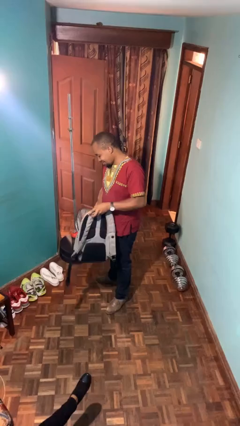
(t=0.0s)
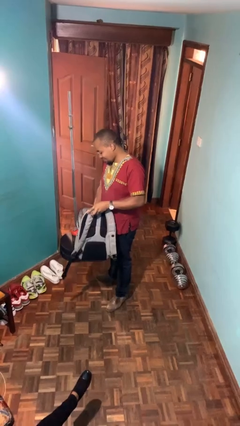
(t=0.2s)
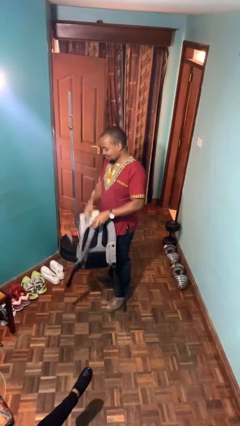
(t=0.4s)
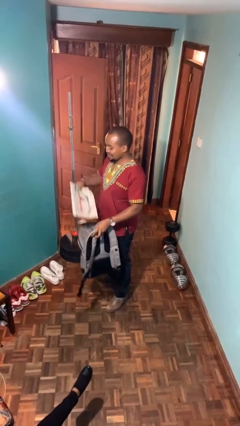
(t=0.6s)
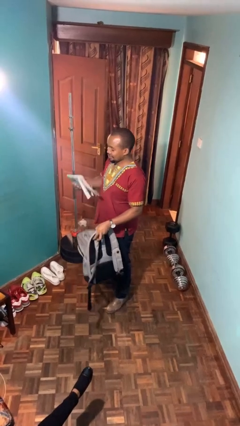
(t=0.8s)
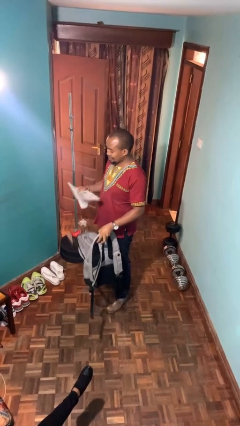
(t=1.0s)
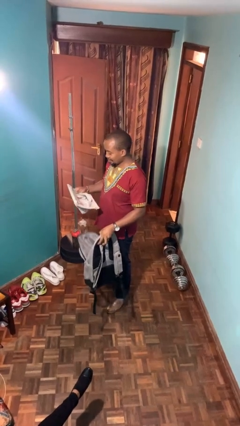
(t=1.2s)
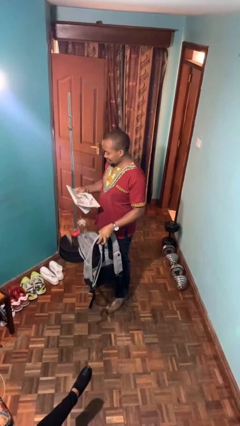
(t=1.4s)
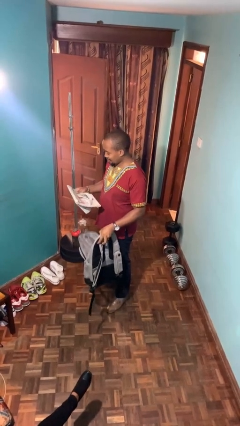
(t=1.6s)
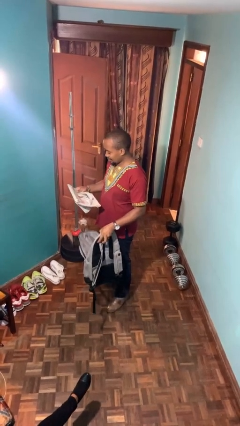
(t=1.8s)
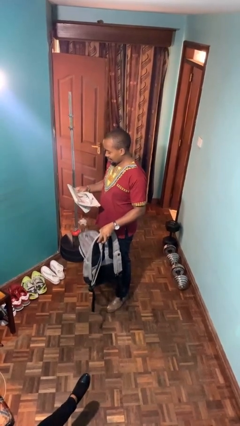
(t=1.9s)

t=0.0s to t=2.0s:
person takes object from backpack

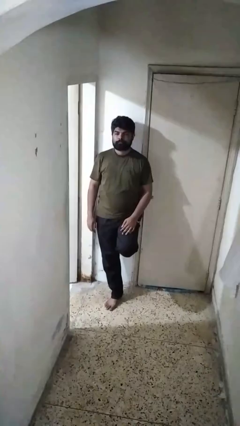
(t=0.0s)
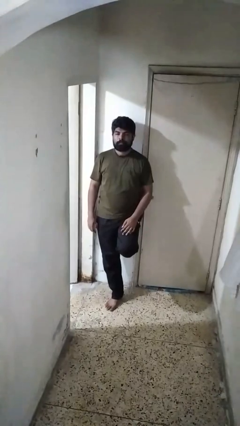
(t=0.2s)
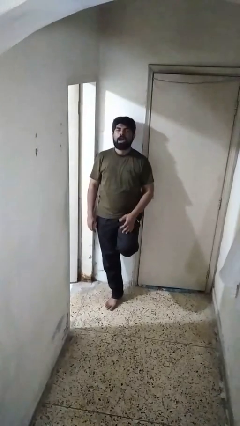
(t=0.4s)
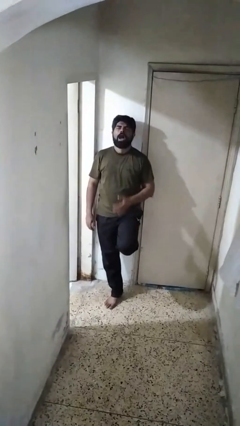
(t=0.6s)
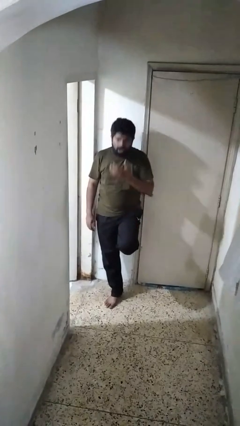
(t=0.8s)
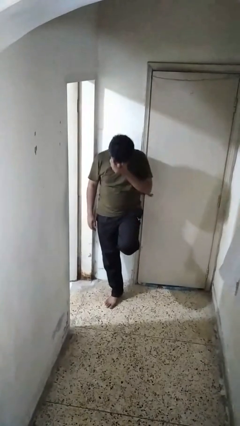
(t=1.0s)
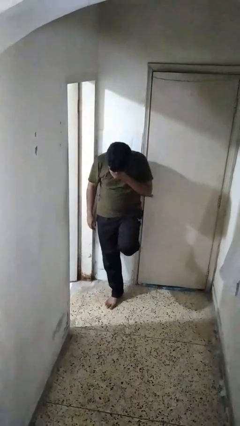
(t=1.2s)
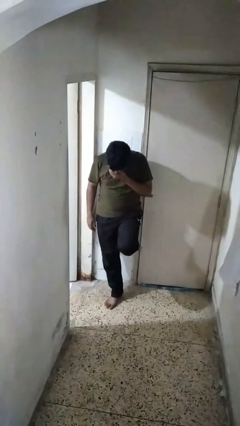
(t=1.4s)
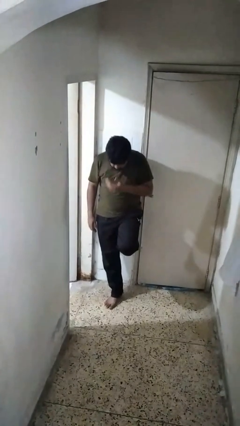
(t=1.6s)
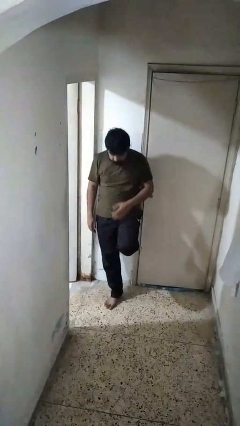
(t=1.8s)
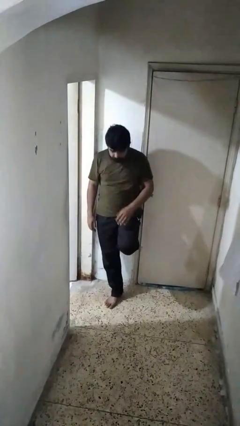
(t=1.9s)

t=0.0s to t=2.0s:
person sneezes into hand

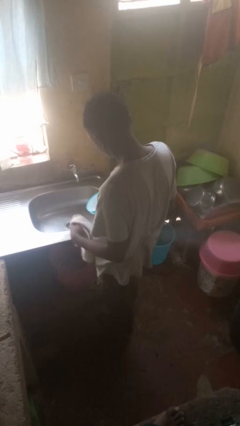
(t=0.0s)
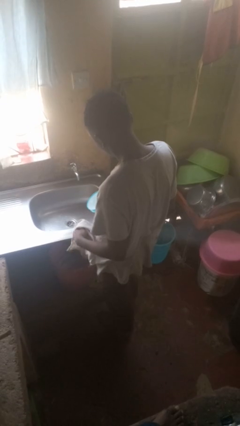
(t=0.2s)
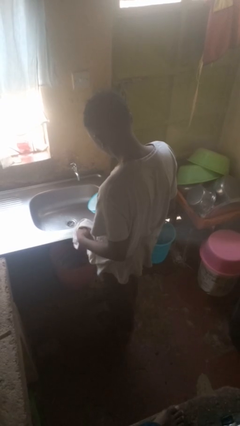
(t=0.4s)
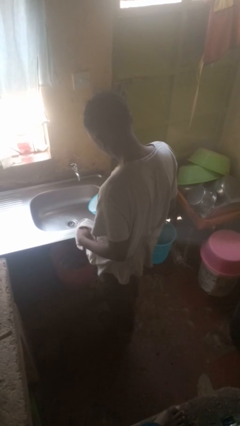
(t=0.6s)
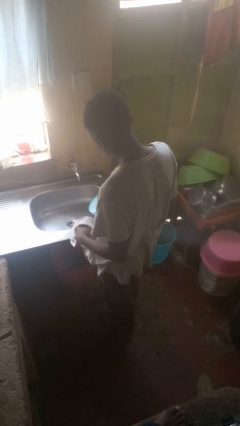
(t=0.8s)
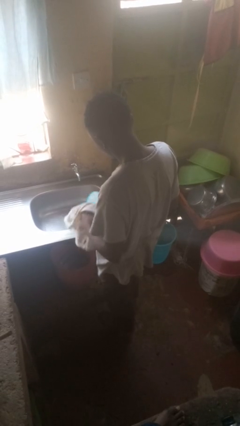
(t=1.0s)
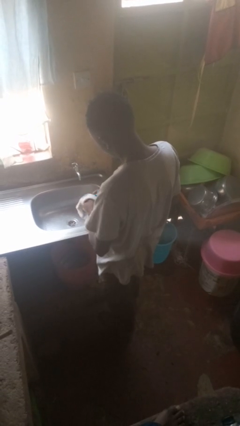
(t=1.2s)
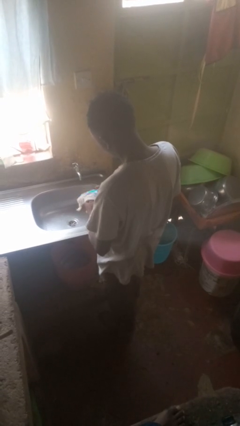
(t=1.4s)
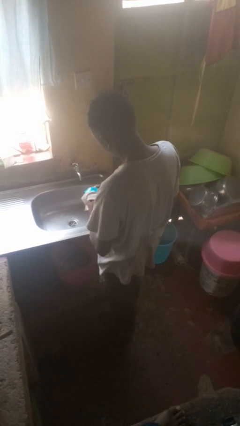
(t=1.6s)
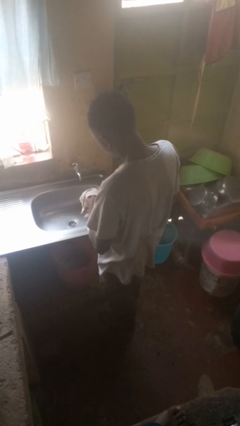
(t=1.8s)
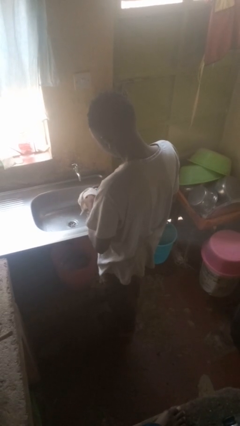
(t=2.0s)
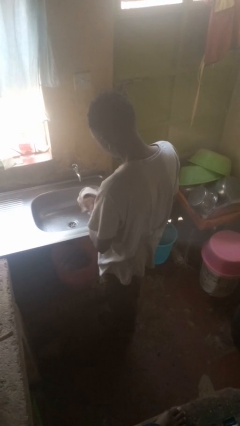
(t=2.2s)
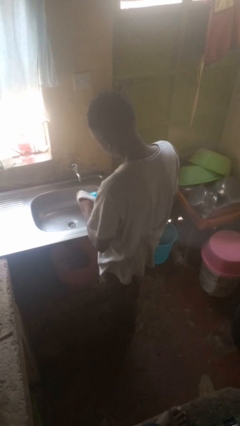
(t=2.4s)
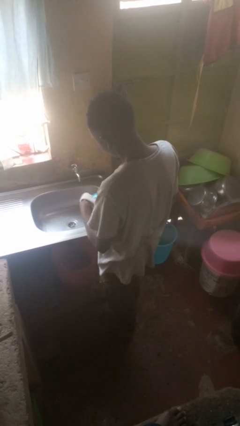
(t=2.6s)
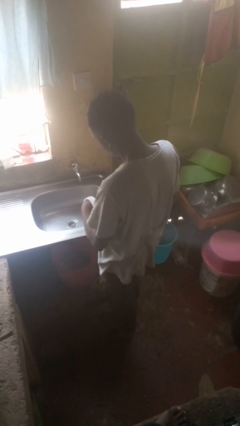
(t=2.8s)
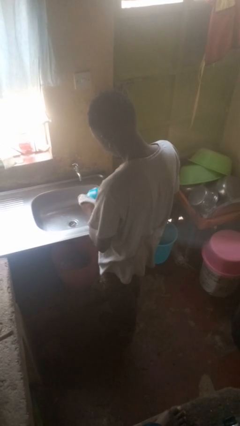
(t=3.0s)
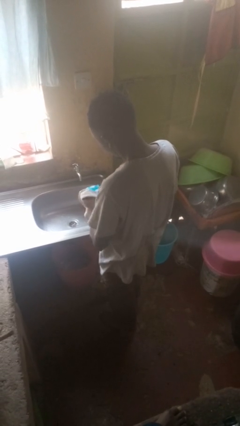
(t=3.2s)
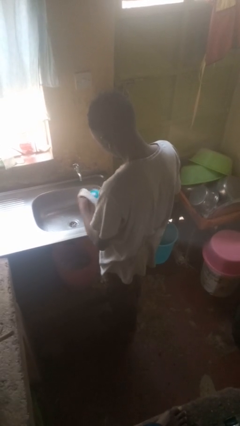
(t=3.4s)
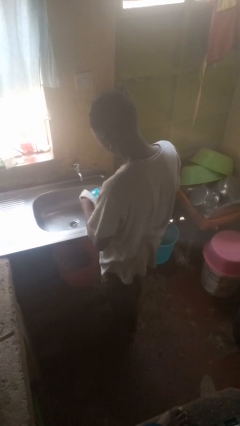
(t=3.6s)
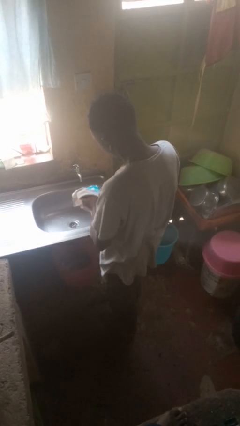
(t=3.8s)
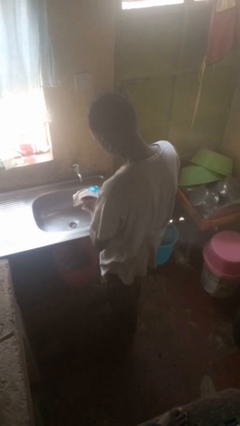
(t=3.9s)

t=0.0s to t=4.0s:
person dries dish

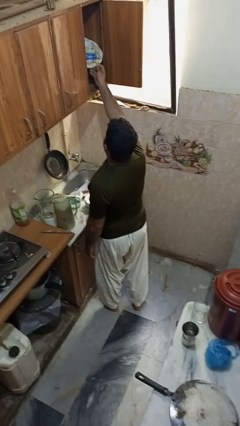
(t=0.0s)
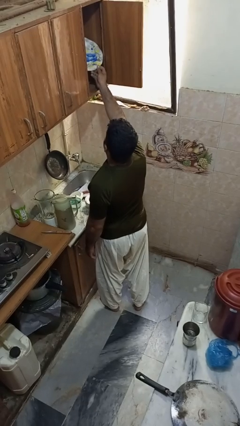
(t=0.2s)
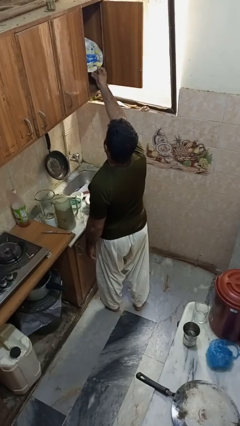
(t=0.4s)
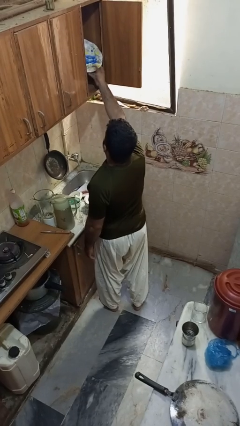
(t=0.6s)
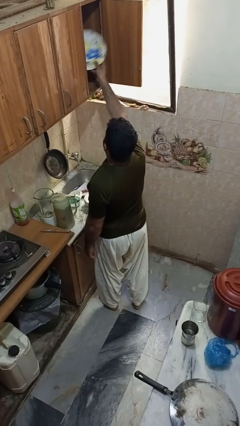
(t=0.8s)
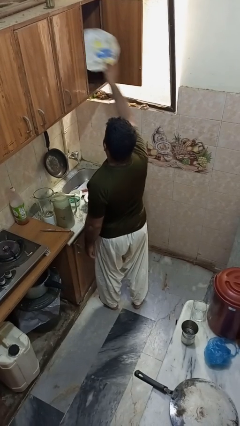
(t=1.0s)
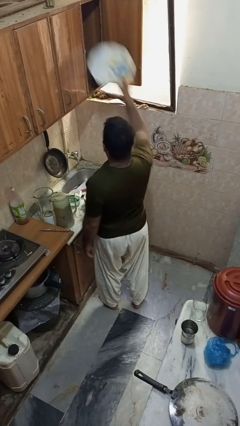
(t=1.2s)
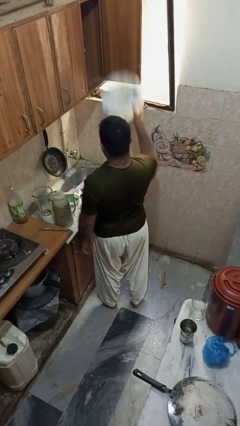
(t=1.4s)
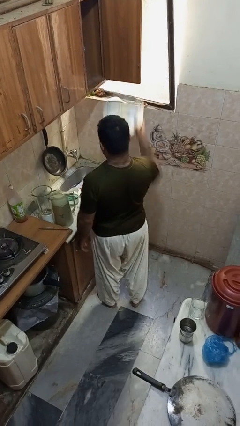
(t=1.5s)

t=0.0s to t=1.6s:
person takes object from cabinet

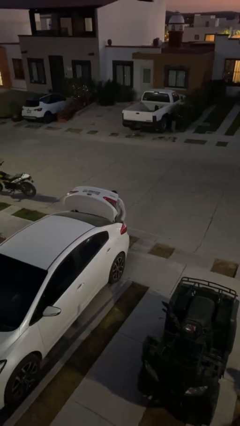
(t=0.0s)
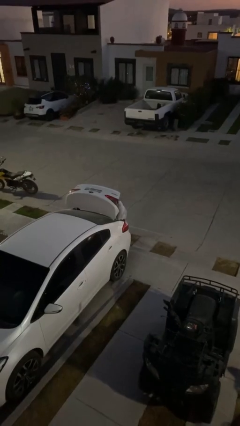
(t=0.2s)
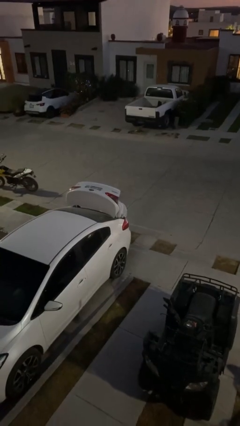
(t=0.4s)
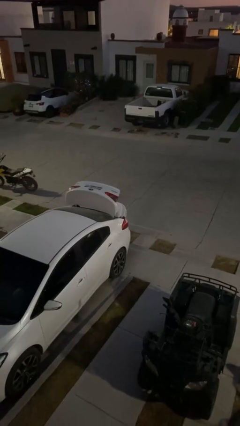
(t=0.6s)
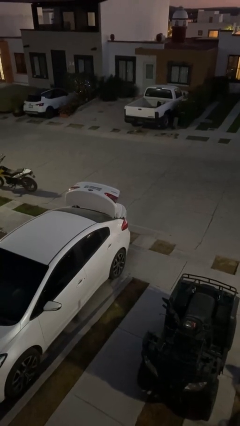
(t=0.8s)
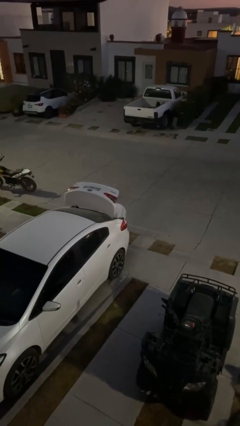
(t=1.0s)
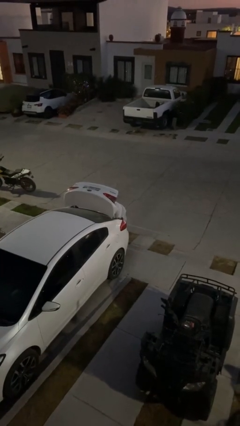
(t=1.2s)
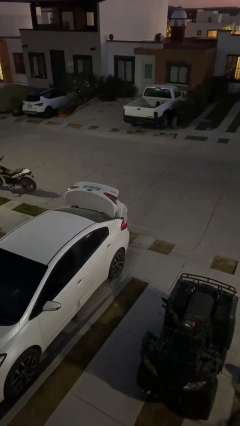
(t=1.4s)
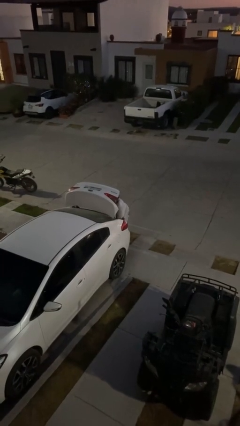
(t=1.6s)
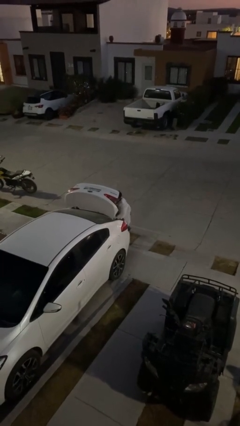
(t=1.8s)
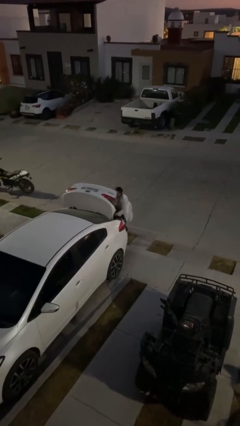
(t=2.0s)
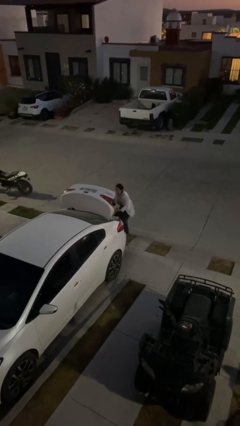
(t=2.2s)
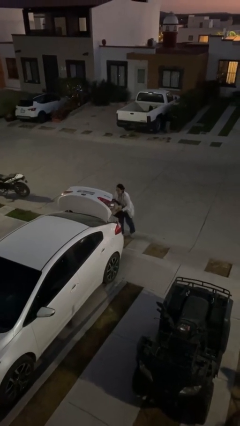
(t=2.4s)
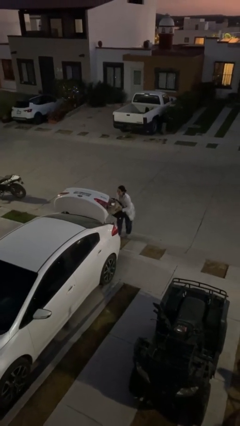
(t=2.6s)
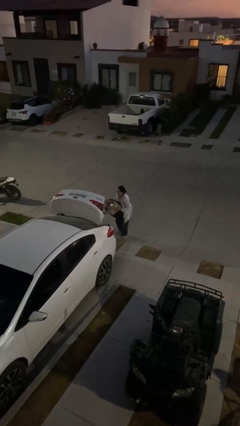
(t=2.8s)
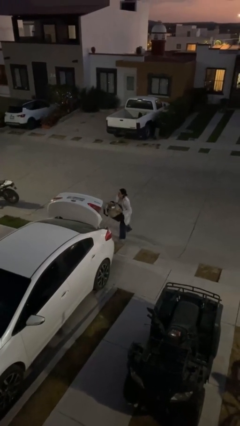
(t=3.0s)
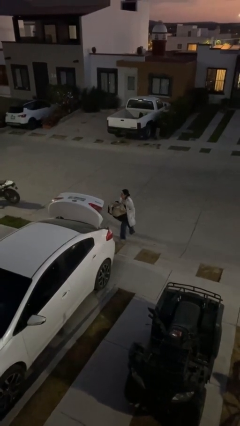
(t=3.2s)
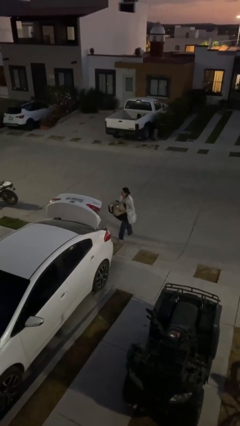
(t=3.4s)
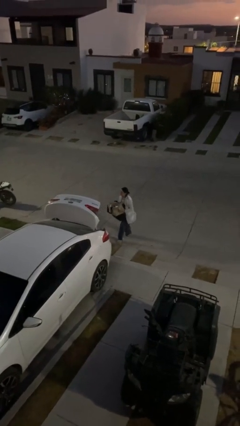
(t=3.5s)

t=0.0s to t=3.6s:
person unloads car

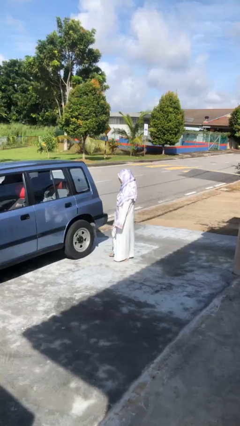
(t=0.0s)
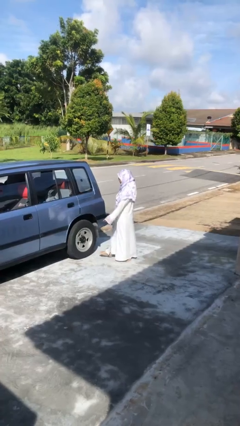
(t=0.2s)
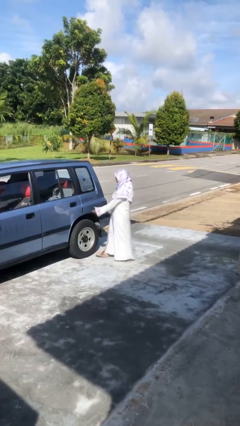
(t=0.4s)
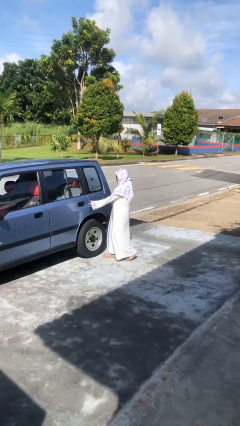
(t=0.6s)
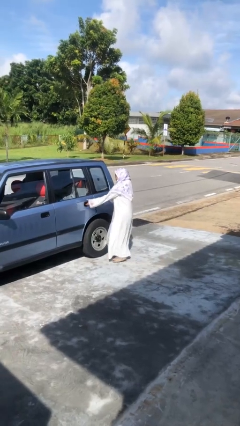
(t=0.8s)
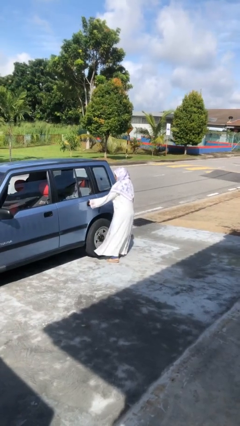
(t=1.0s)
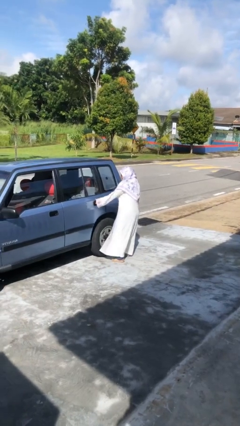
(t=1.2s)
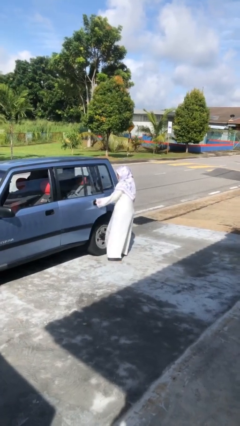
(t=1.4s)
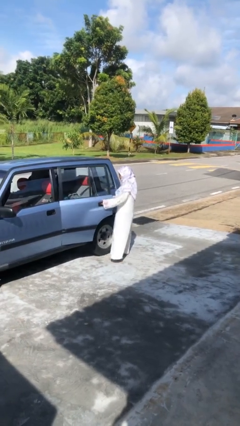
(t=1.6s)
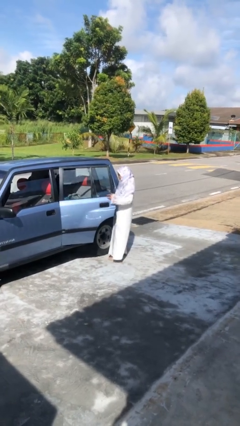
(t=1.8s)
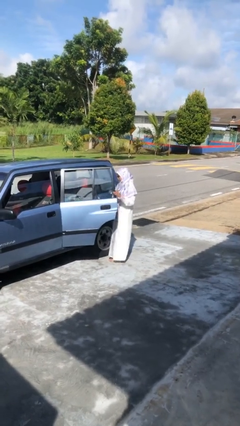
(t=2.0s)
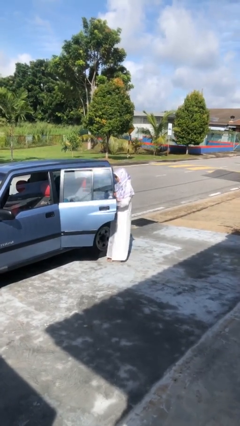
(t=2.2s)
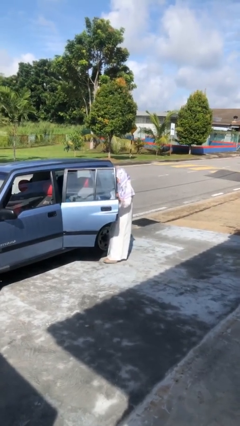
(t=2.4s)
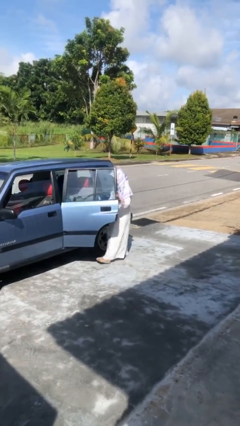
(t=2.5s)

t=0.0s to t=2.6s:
person opens car door

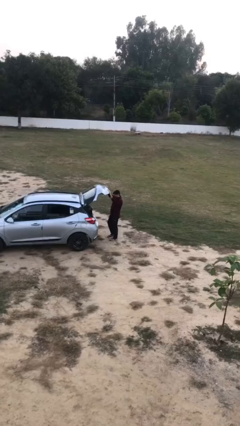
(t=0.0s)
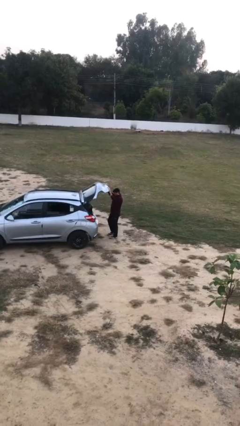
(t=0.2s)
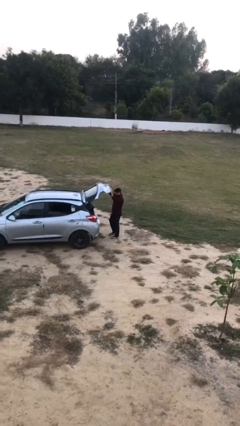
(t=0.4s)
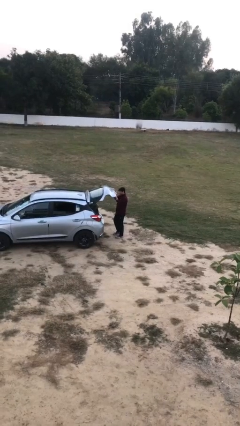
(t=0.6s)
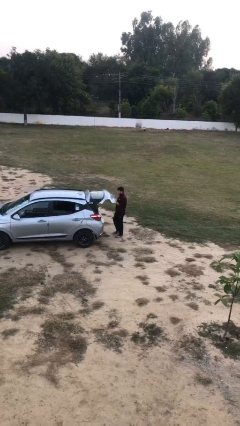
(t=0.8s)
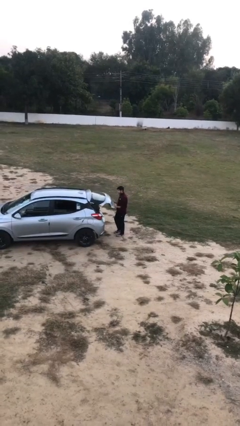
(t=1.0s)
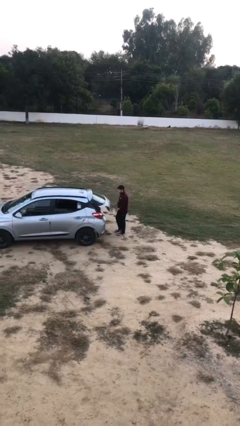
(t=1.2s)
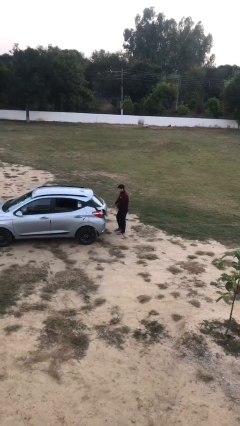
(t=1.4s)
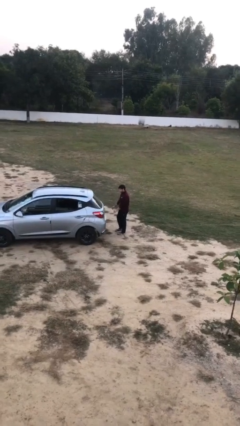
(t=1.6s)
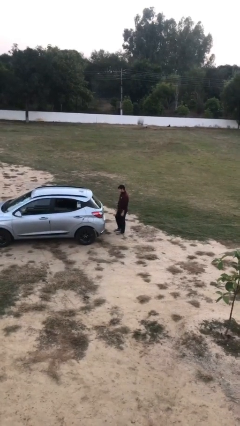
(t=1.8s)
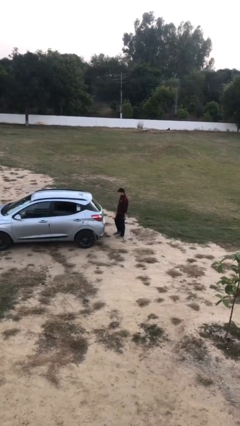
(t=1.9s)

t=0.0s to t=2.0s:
person closes car trunk
